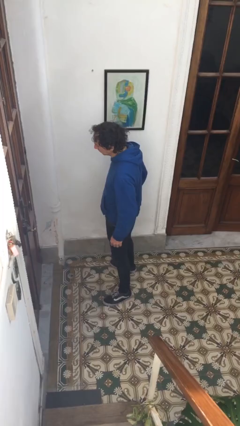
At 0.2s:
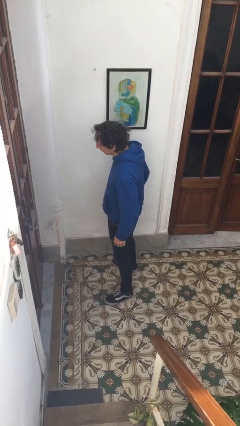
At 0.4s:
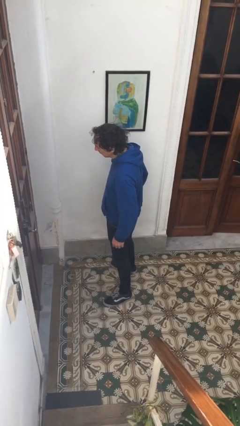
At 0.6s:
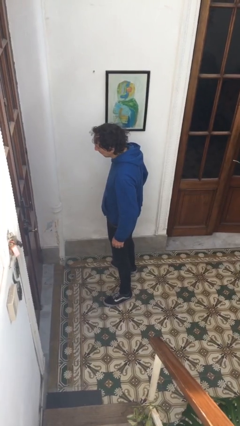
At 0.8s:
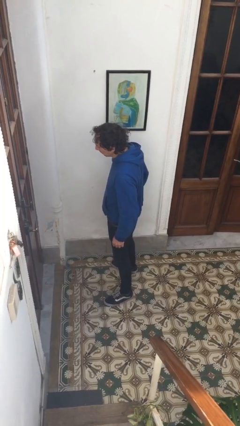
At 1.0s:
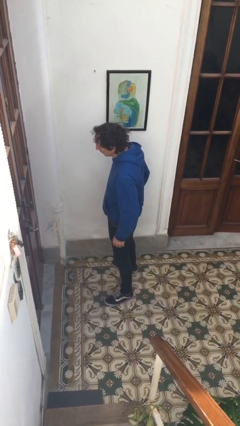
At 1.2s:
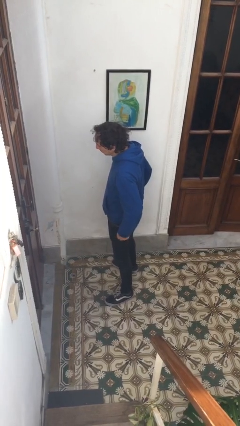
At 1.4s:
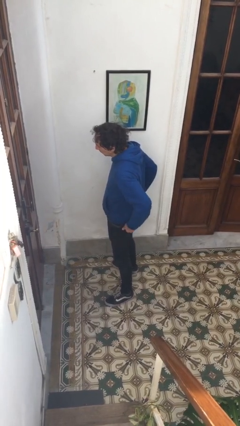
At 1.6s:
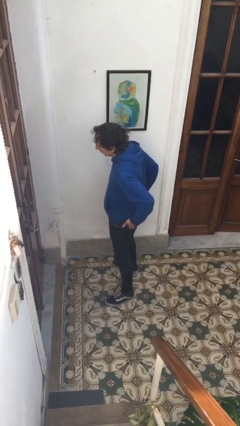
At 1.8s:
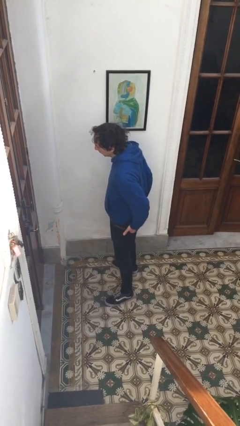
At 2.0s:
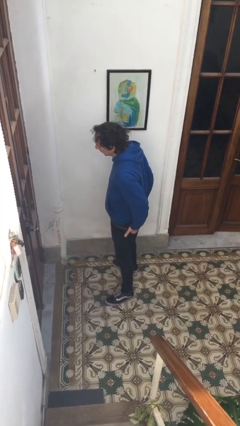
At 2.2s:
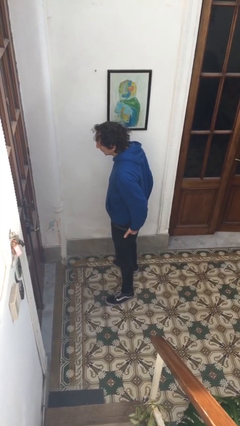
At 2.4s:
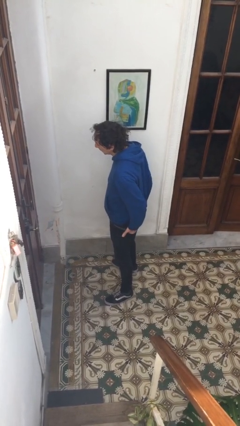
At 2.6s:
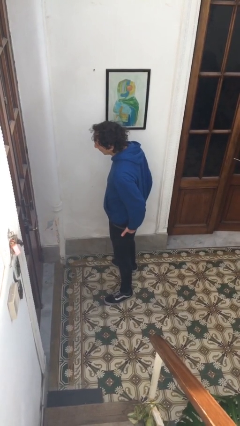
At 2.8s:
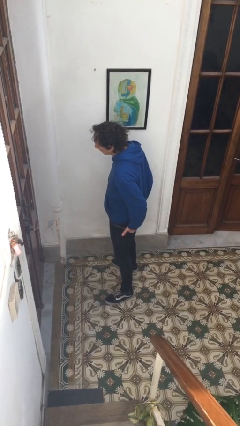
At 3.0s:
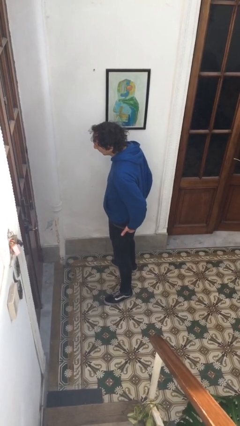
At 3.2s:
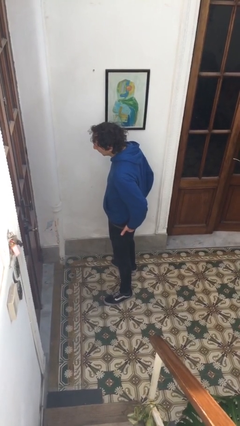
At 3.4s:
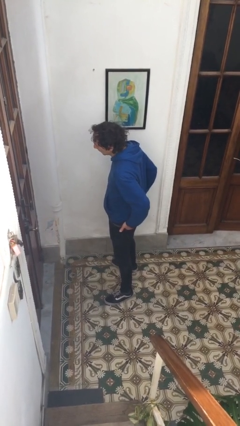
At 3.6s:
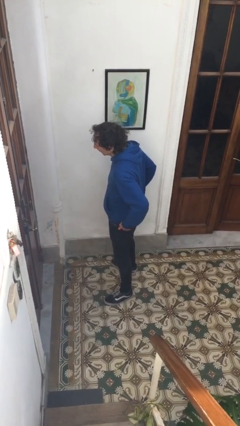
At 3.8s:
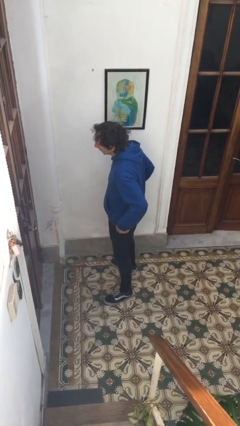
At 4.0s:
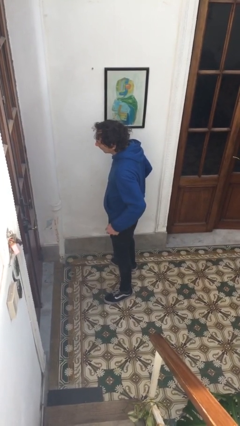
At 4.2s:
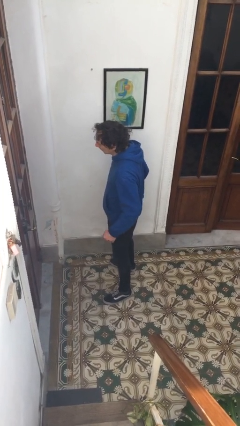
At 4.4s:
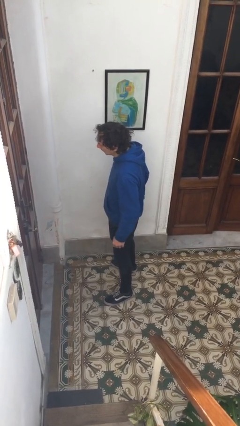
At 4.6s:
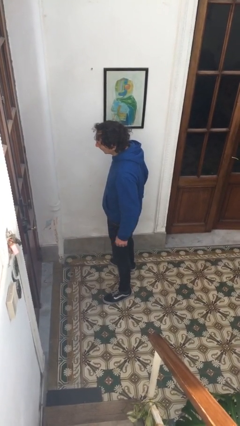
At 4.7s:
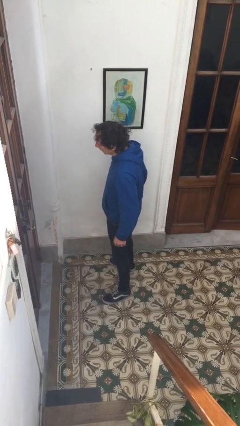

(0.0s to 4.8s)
person puts hands in back pockets

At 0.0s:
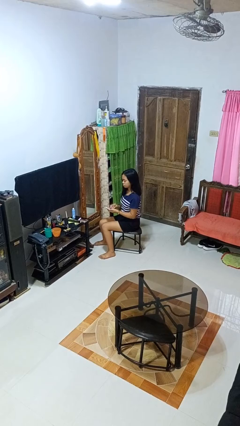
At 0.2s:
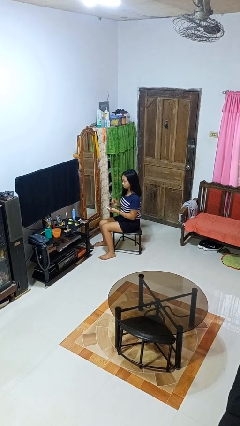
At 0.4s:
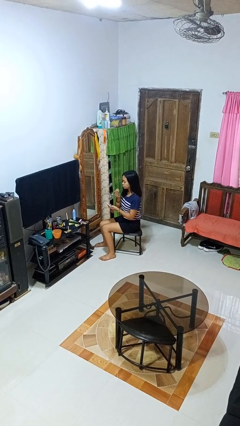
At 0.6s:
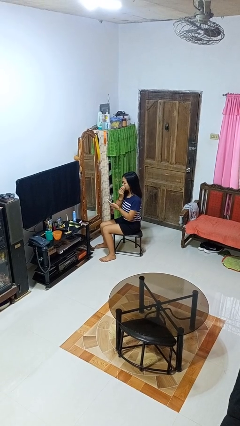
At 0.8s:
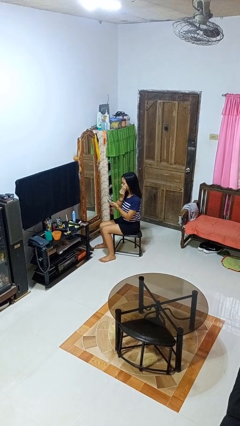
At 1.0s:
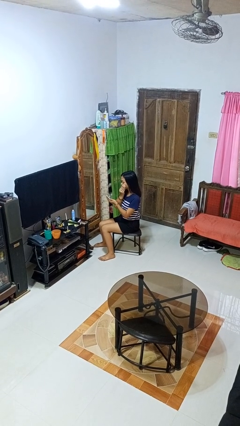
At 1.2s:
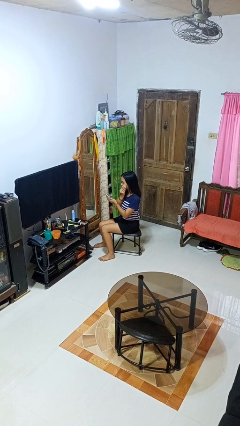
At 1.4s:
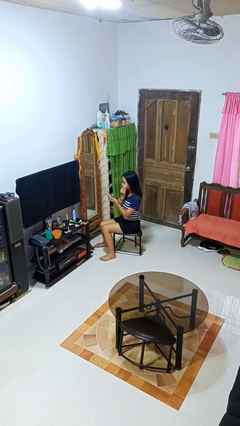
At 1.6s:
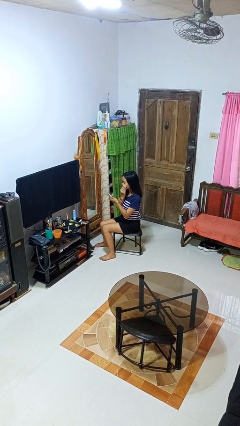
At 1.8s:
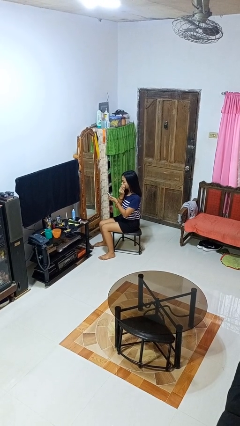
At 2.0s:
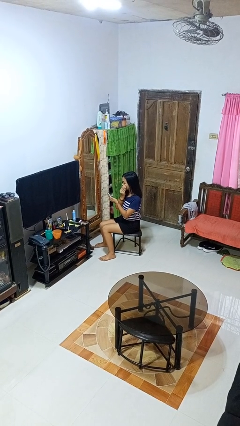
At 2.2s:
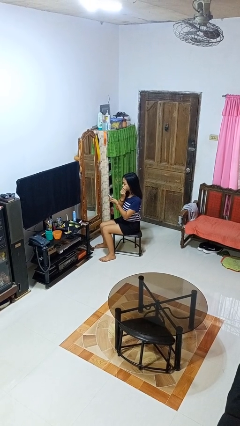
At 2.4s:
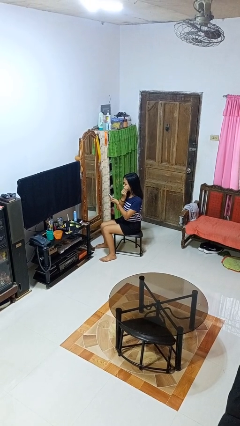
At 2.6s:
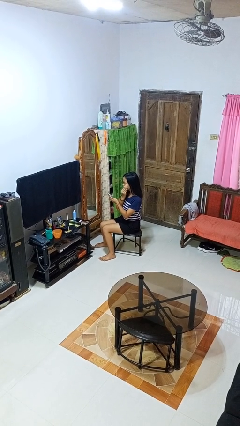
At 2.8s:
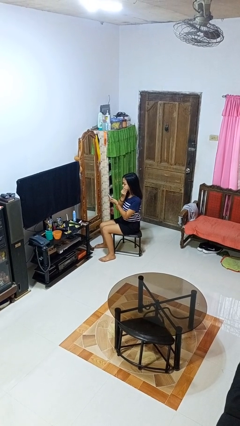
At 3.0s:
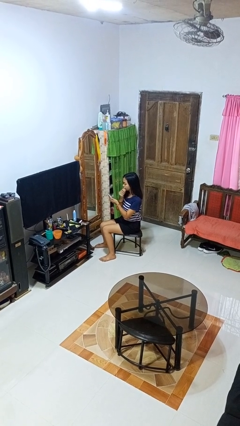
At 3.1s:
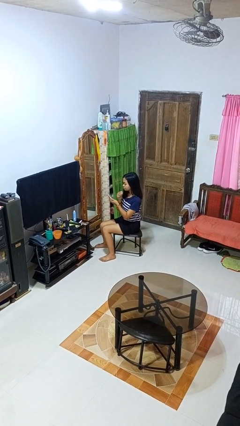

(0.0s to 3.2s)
person applies foundation makeup

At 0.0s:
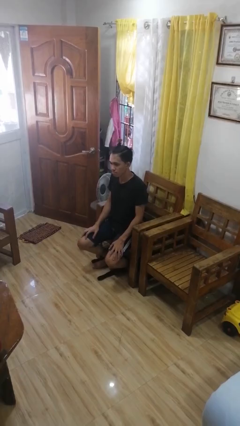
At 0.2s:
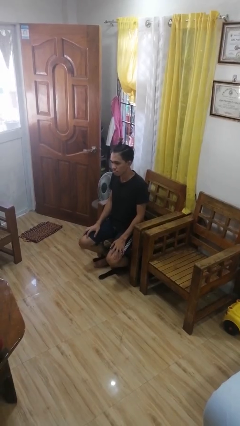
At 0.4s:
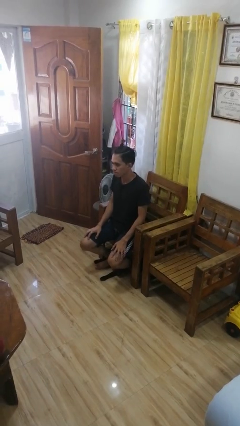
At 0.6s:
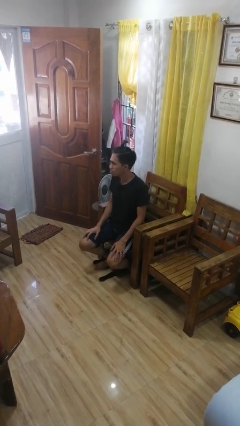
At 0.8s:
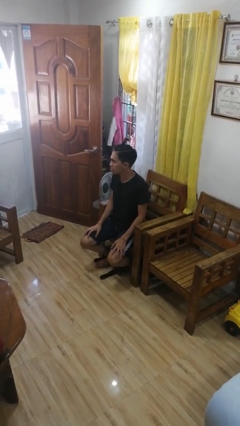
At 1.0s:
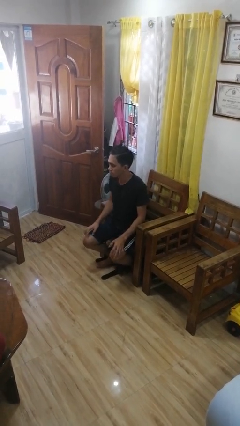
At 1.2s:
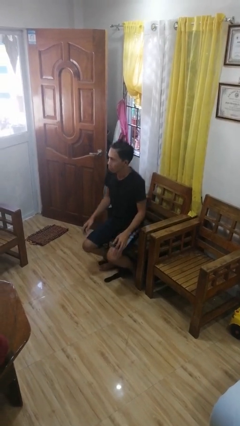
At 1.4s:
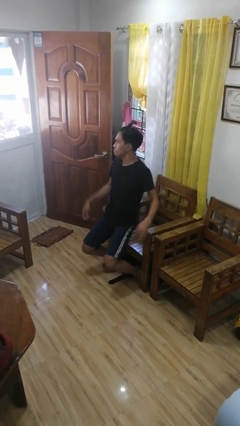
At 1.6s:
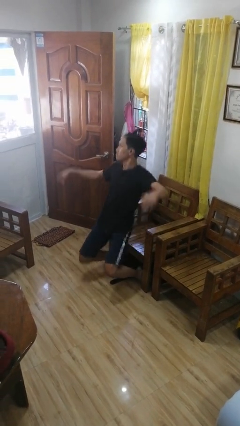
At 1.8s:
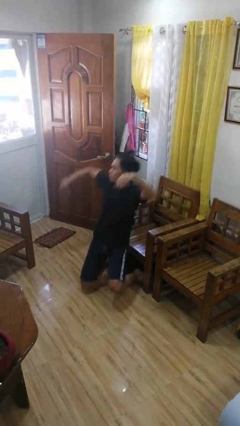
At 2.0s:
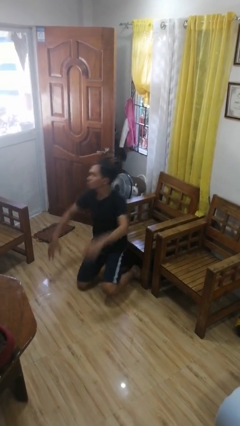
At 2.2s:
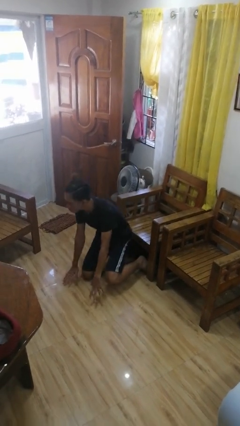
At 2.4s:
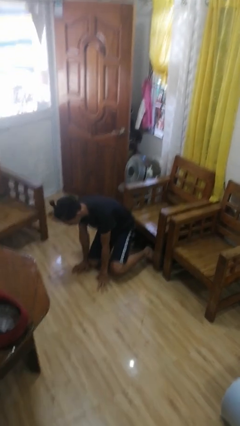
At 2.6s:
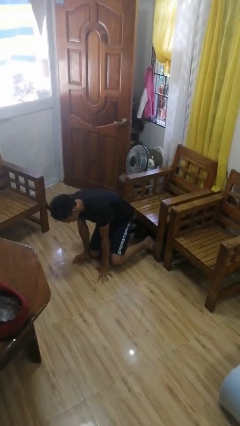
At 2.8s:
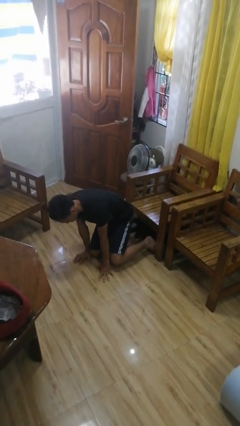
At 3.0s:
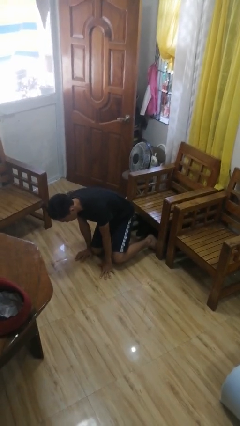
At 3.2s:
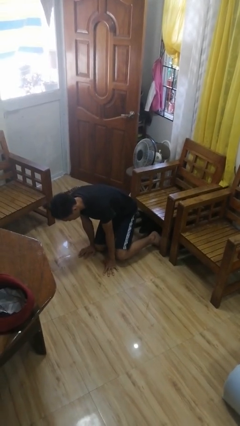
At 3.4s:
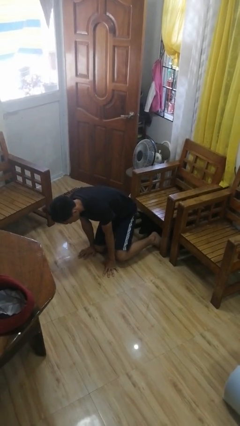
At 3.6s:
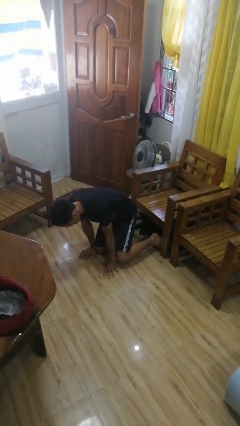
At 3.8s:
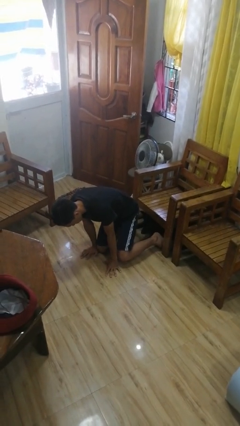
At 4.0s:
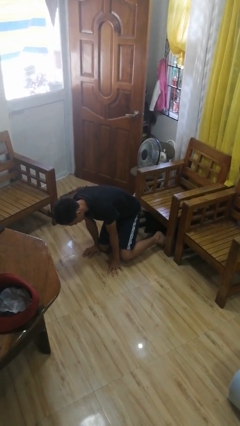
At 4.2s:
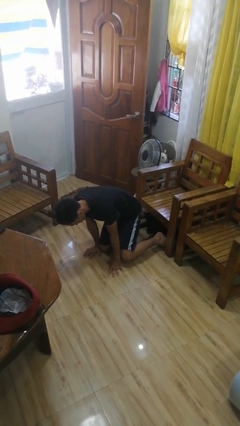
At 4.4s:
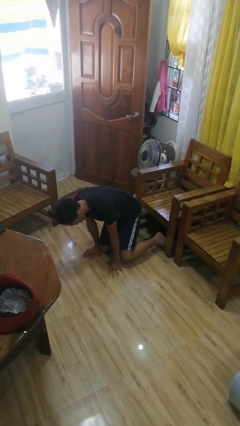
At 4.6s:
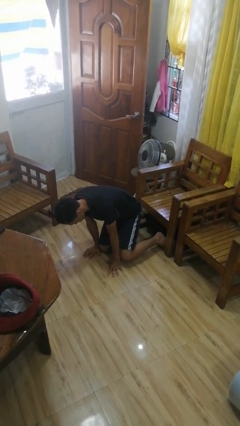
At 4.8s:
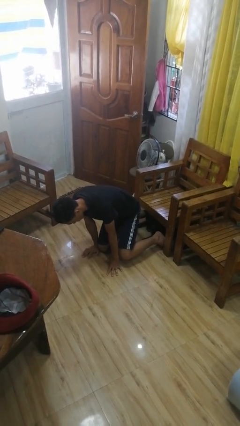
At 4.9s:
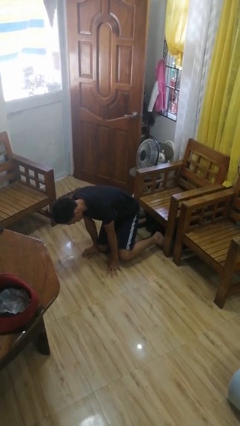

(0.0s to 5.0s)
person falls from chair

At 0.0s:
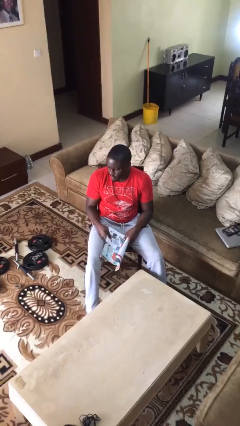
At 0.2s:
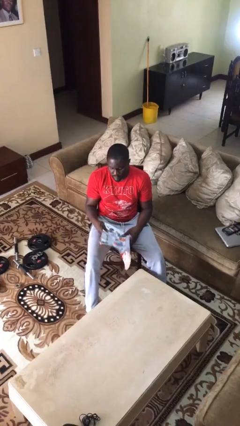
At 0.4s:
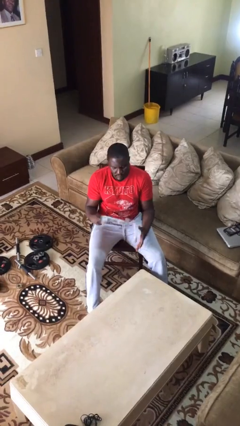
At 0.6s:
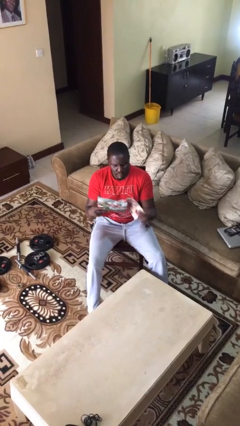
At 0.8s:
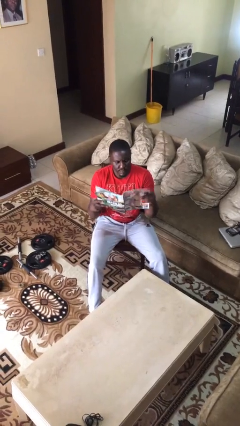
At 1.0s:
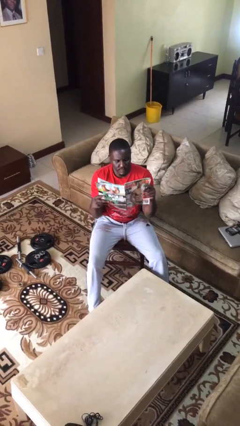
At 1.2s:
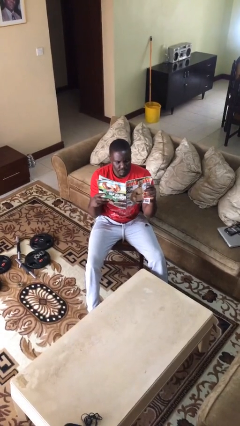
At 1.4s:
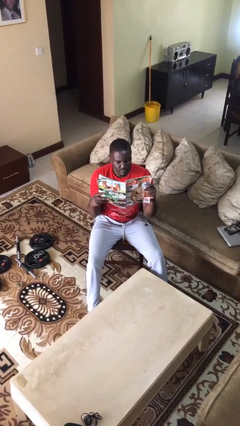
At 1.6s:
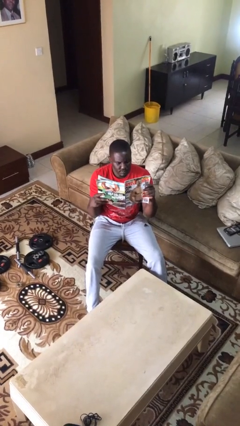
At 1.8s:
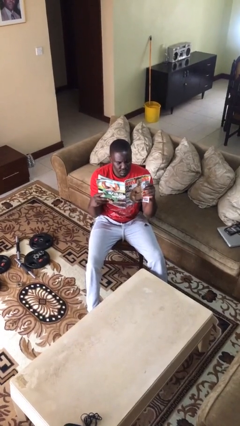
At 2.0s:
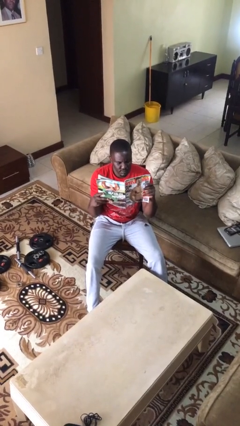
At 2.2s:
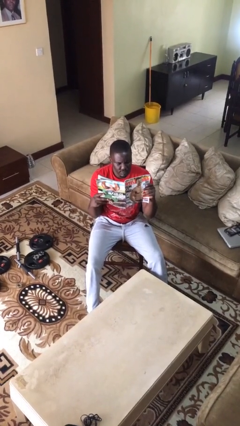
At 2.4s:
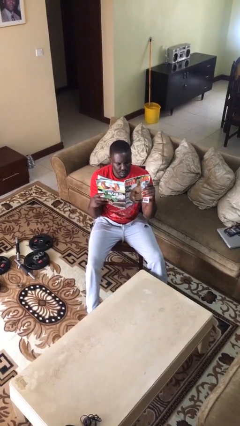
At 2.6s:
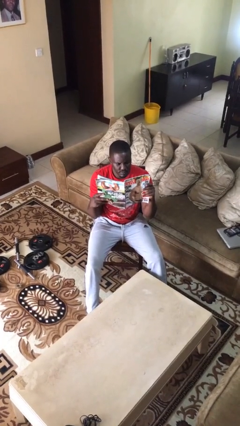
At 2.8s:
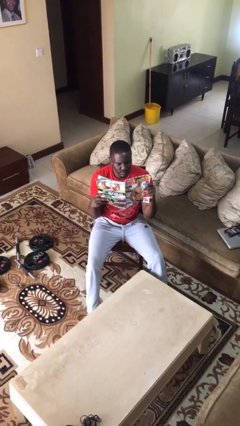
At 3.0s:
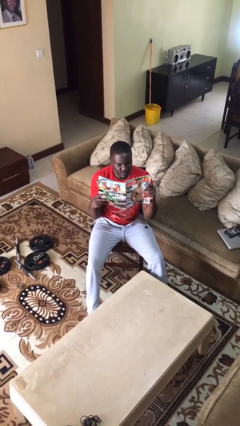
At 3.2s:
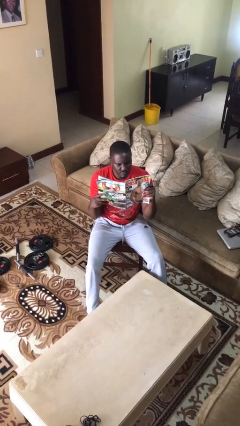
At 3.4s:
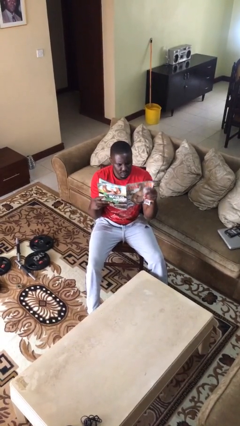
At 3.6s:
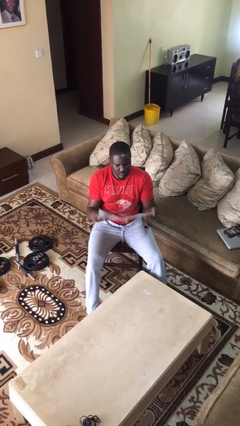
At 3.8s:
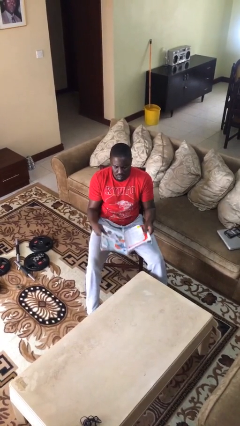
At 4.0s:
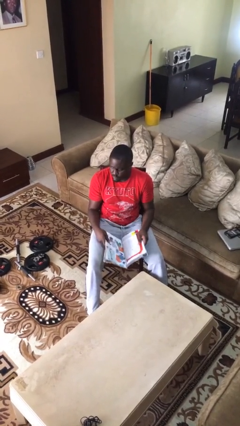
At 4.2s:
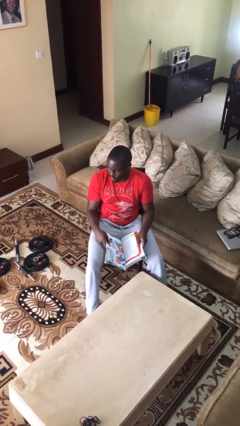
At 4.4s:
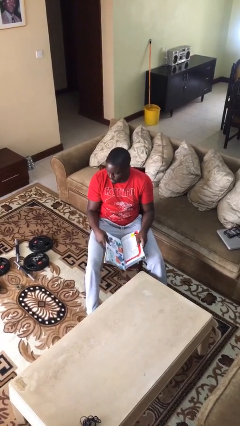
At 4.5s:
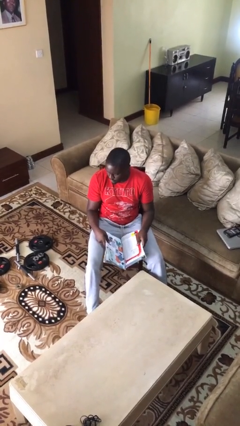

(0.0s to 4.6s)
person reads document
